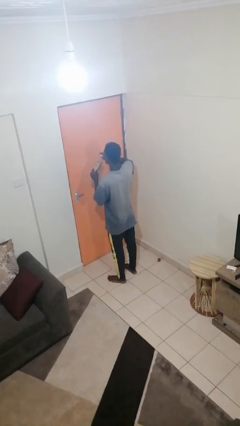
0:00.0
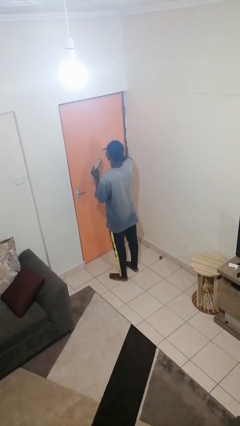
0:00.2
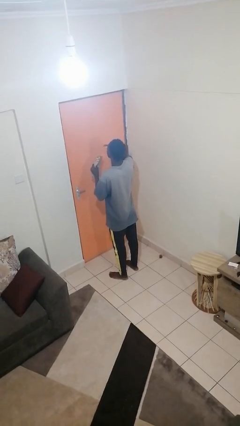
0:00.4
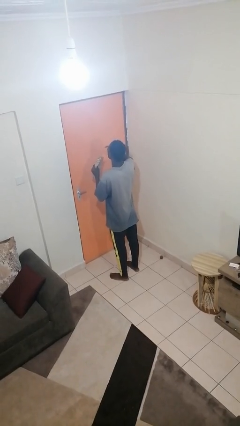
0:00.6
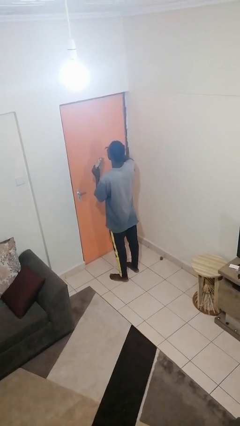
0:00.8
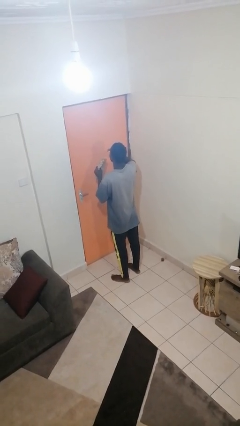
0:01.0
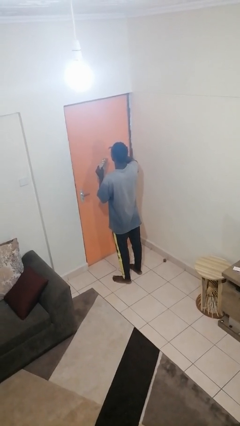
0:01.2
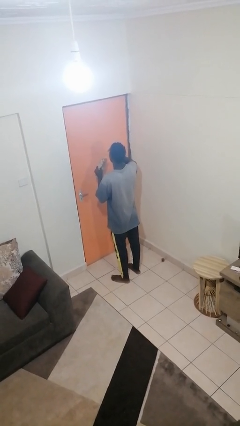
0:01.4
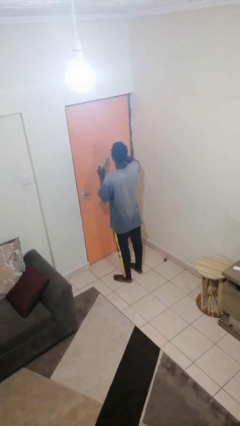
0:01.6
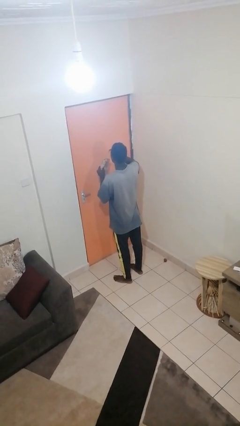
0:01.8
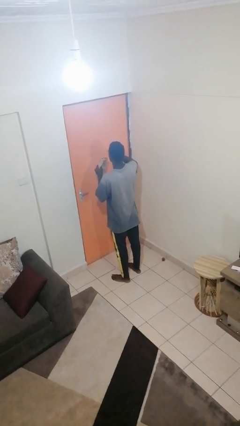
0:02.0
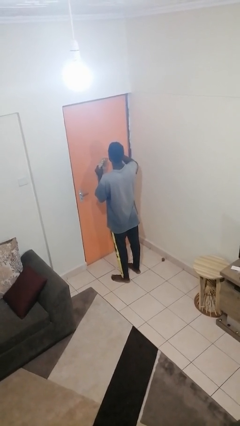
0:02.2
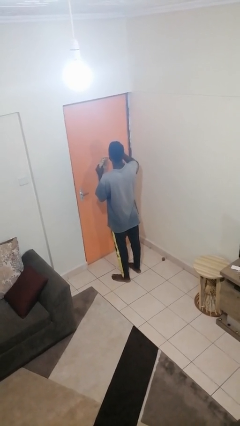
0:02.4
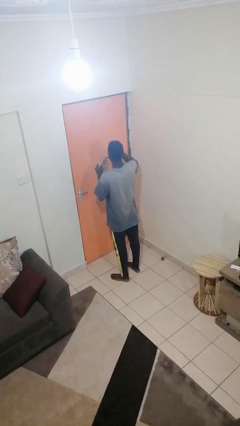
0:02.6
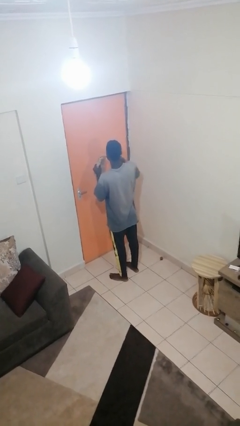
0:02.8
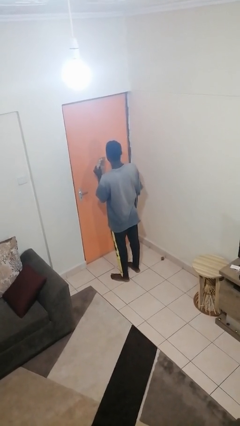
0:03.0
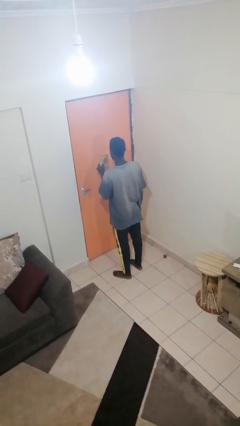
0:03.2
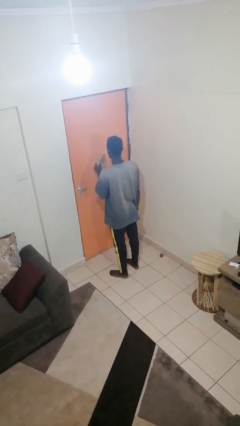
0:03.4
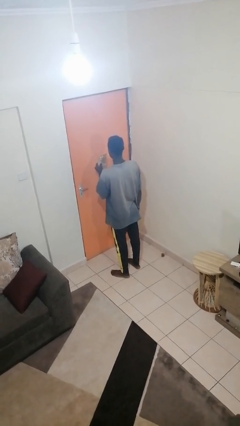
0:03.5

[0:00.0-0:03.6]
person eats snack from bag

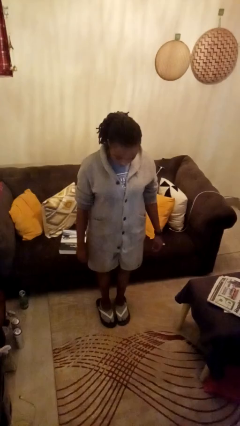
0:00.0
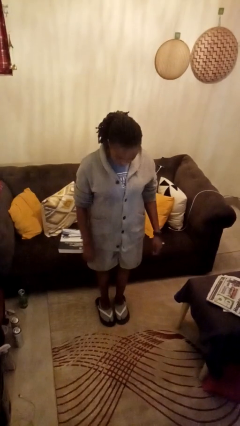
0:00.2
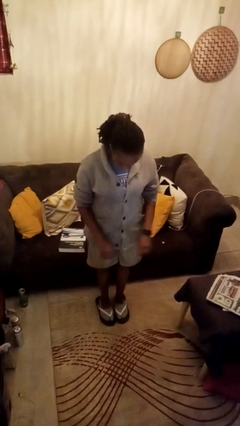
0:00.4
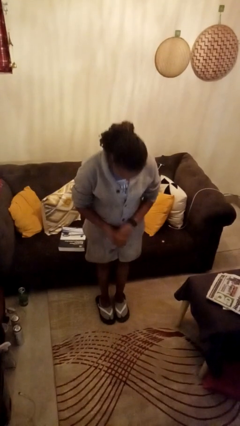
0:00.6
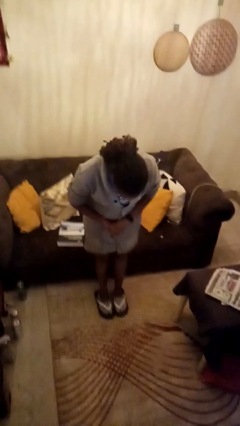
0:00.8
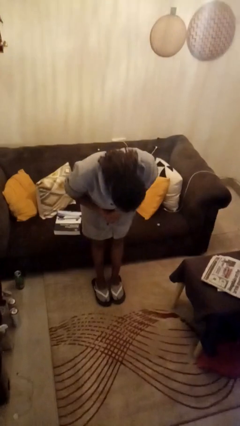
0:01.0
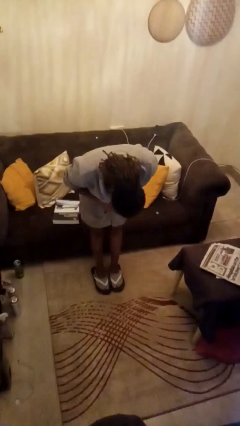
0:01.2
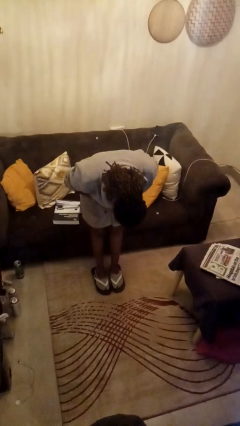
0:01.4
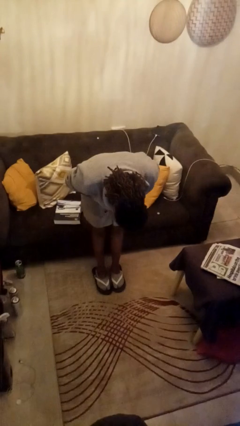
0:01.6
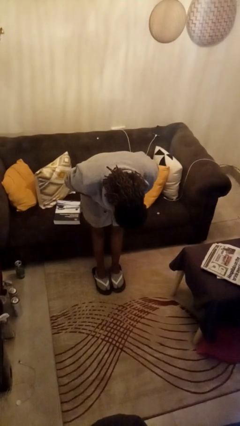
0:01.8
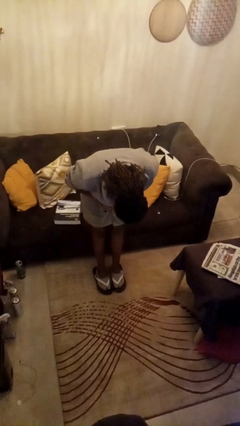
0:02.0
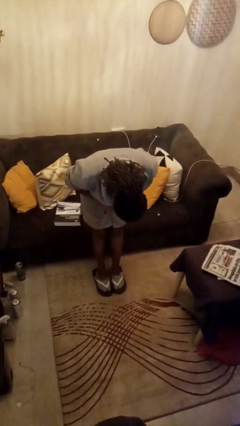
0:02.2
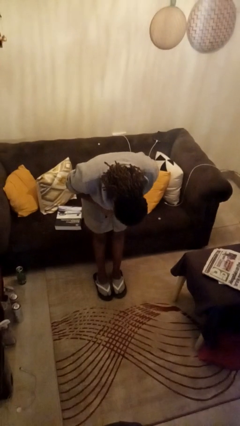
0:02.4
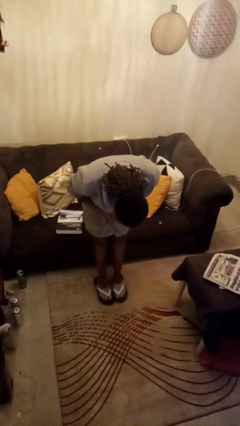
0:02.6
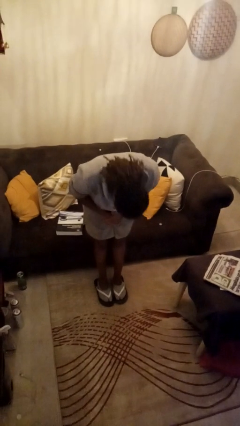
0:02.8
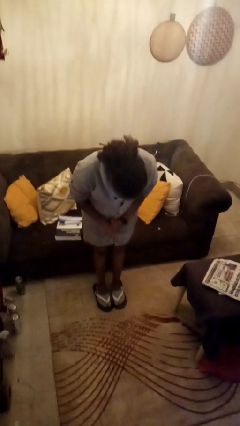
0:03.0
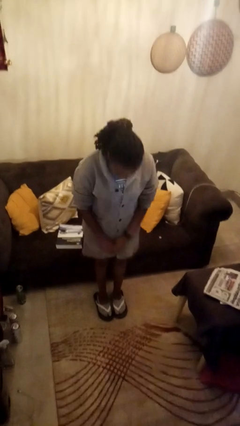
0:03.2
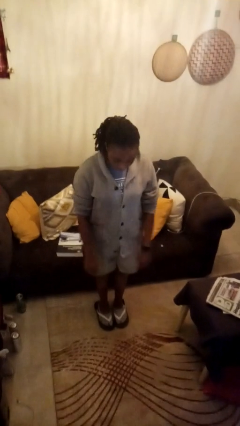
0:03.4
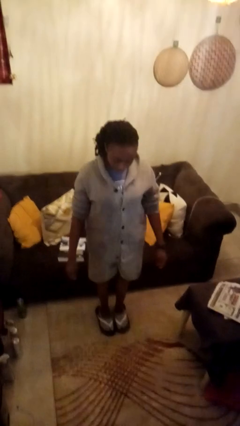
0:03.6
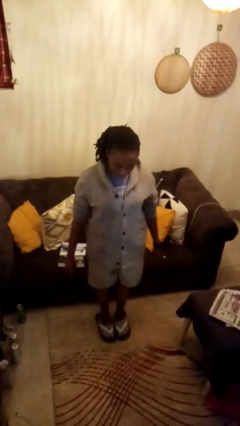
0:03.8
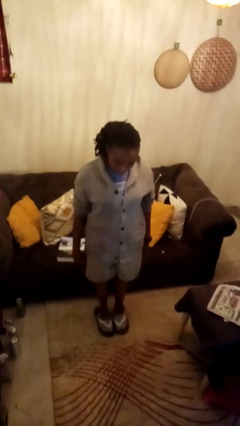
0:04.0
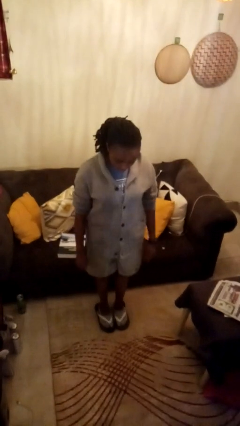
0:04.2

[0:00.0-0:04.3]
person bows

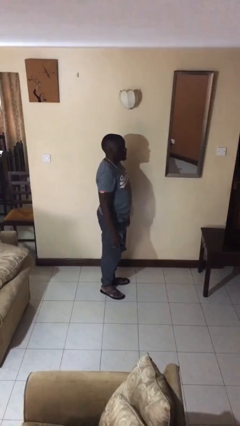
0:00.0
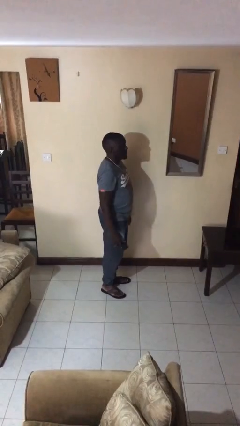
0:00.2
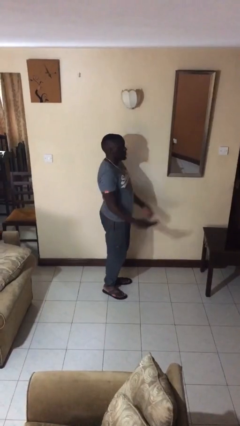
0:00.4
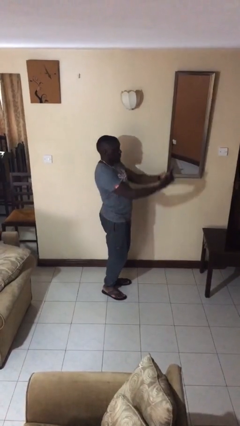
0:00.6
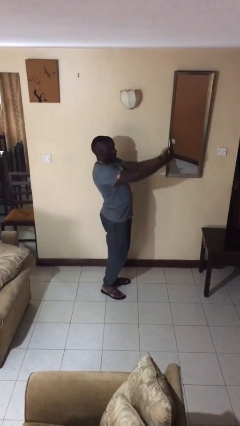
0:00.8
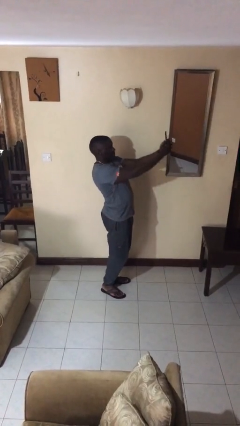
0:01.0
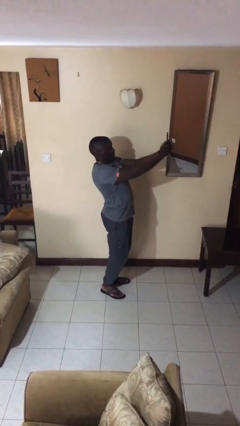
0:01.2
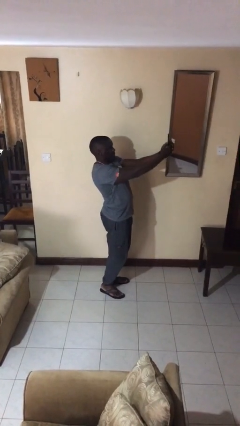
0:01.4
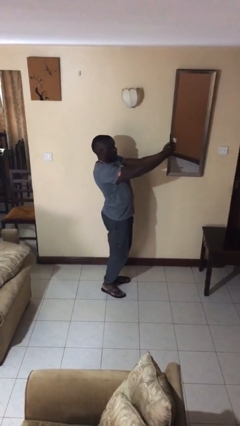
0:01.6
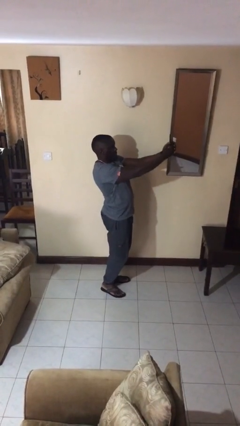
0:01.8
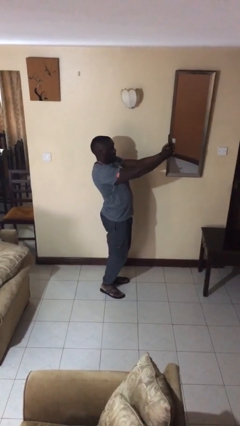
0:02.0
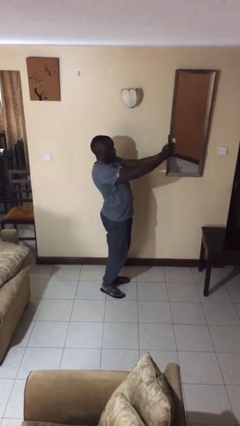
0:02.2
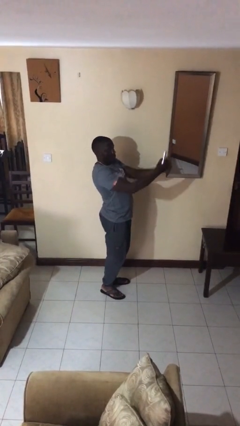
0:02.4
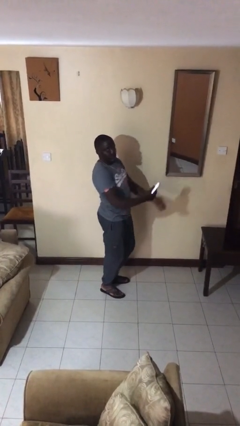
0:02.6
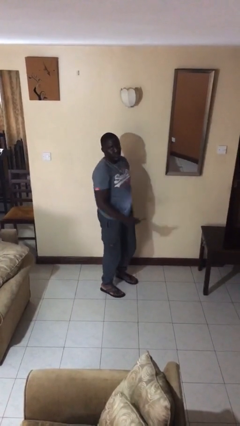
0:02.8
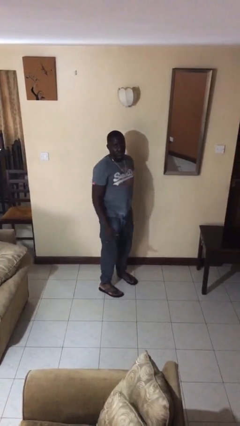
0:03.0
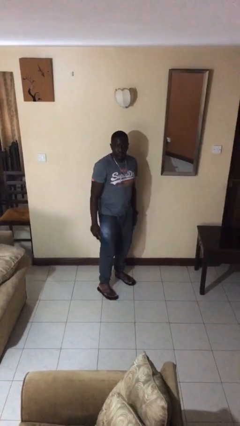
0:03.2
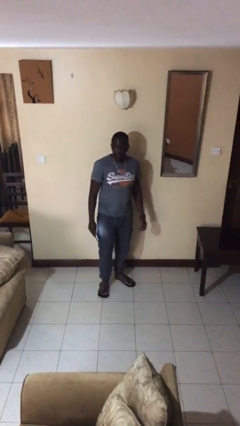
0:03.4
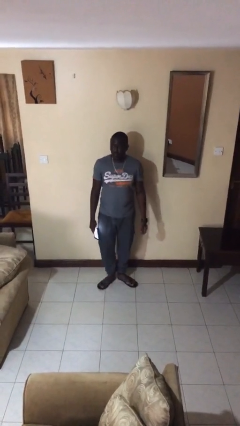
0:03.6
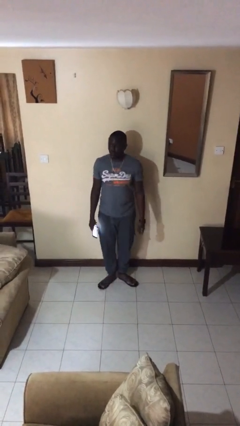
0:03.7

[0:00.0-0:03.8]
person takes selfie

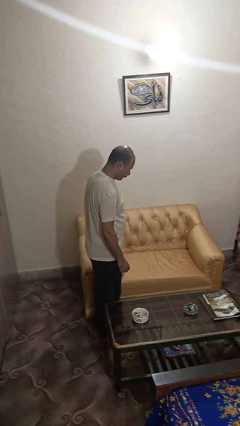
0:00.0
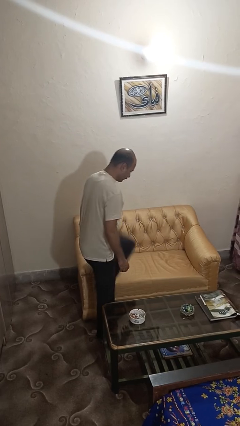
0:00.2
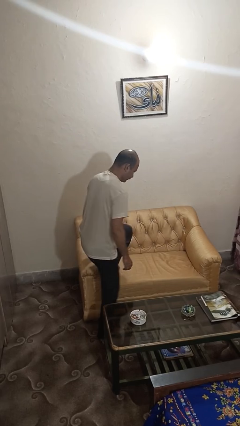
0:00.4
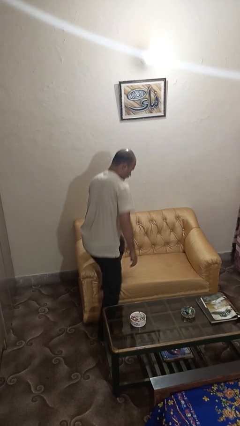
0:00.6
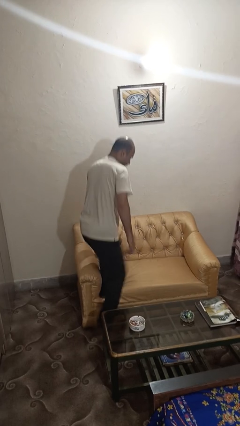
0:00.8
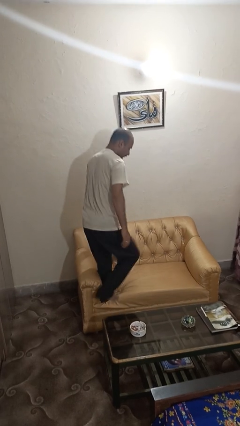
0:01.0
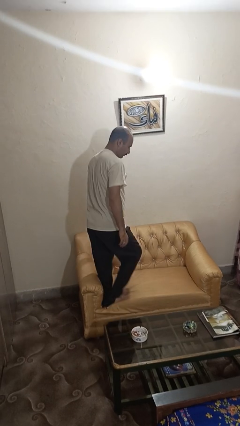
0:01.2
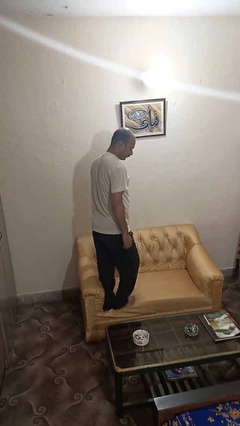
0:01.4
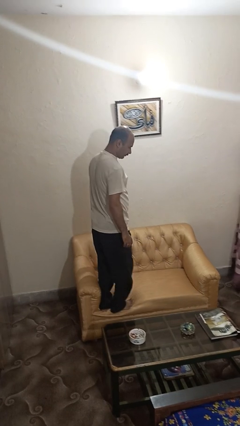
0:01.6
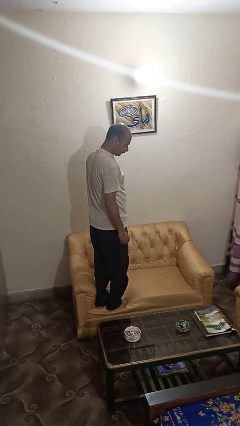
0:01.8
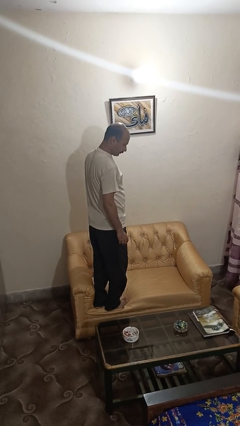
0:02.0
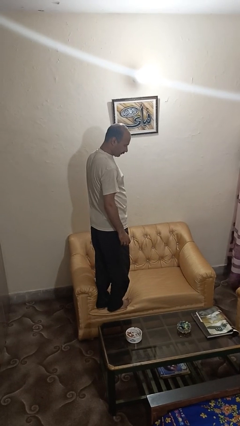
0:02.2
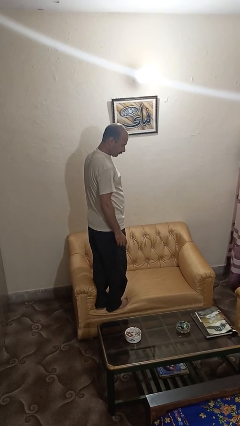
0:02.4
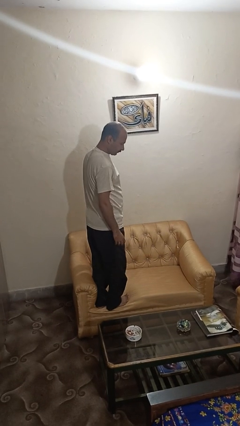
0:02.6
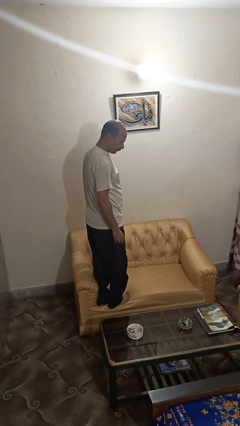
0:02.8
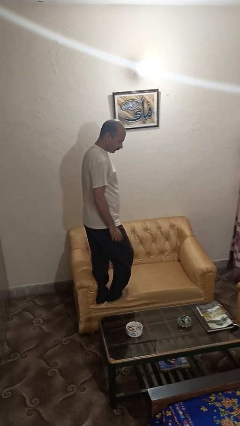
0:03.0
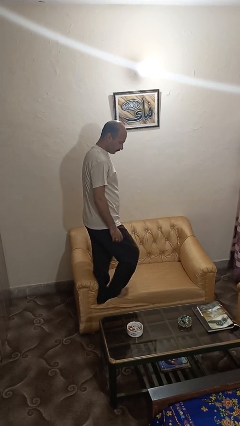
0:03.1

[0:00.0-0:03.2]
person climbs on couch

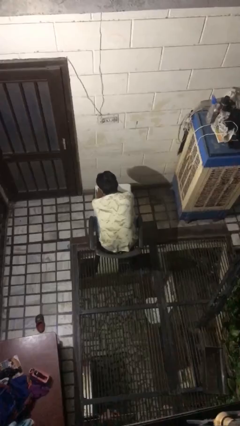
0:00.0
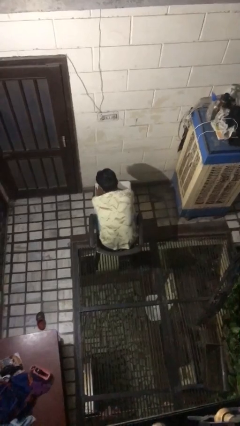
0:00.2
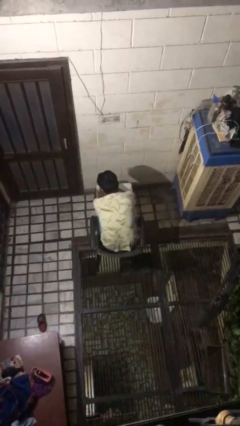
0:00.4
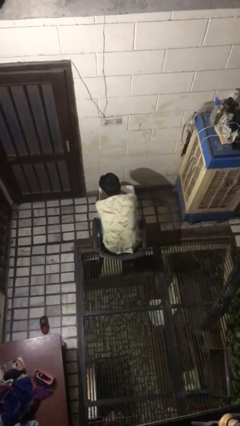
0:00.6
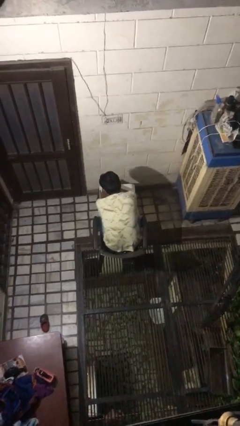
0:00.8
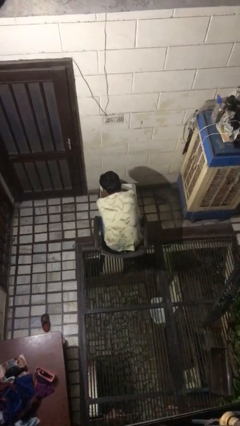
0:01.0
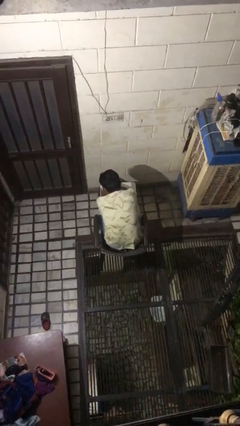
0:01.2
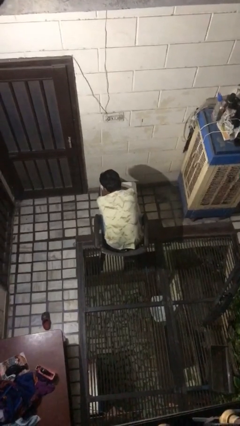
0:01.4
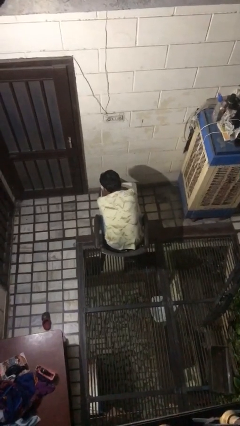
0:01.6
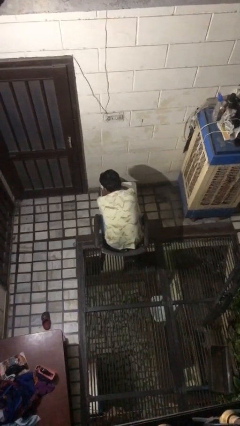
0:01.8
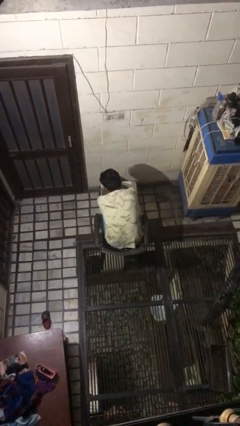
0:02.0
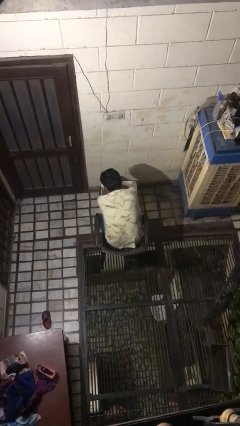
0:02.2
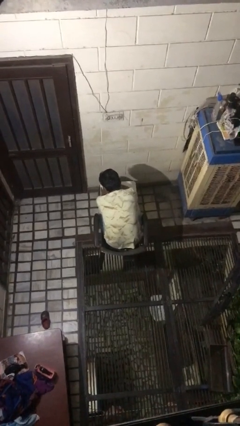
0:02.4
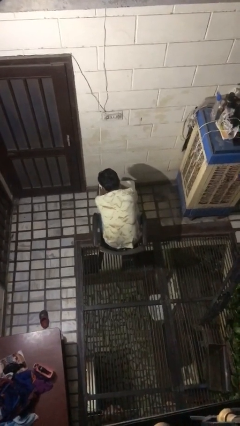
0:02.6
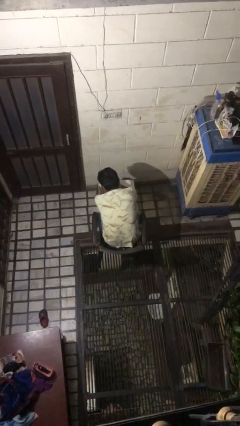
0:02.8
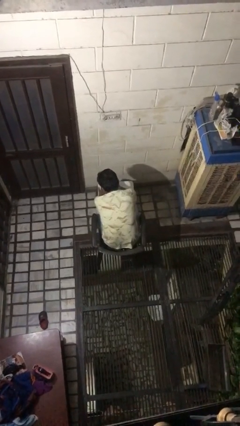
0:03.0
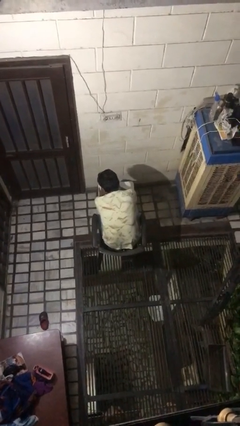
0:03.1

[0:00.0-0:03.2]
person paints fingernails
